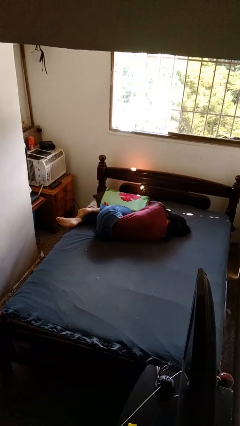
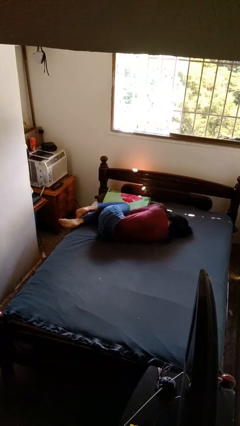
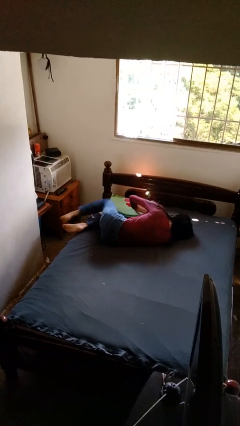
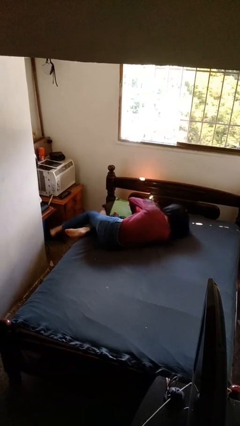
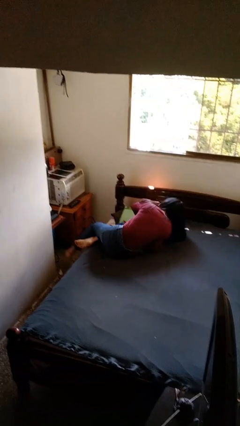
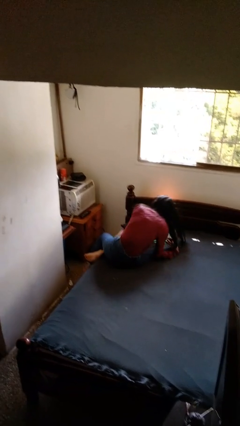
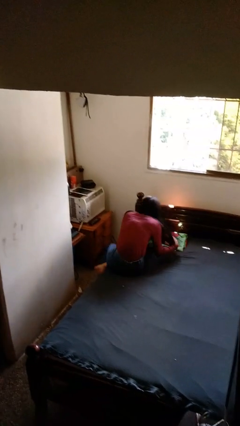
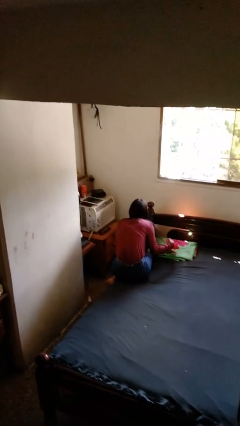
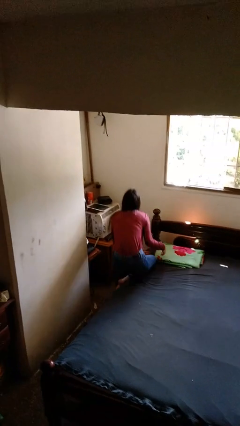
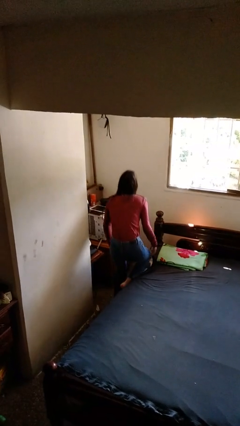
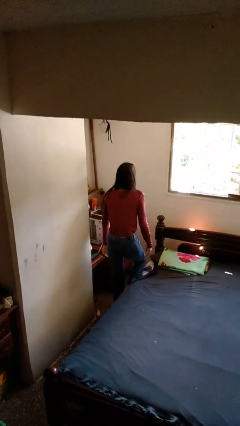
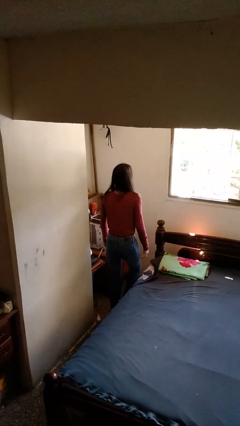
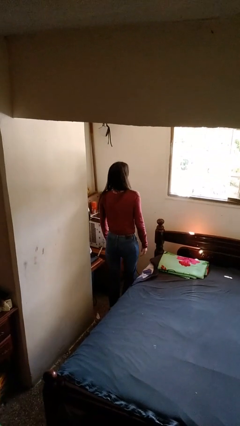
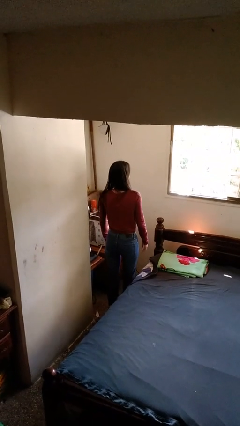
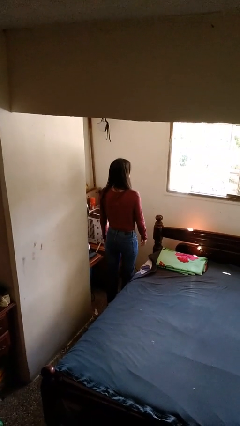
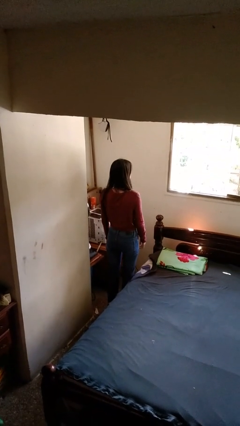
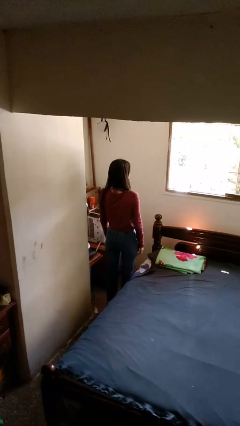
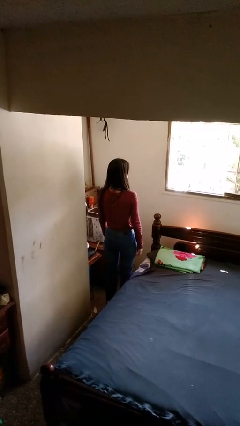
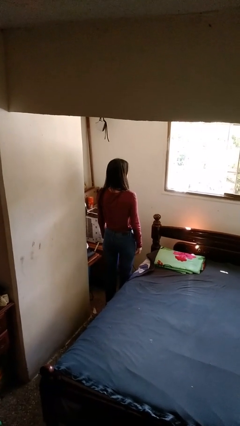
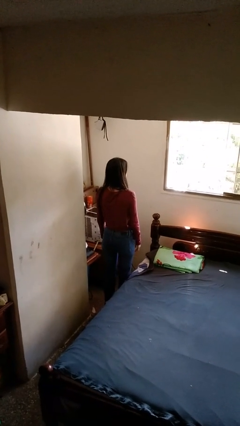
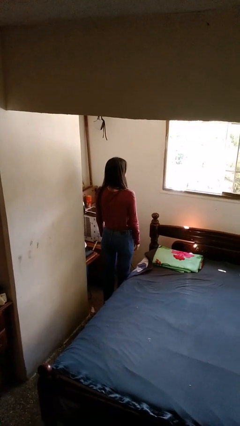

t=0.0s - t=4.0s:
person stands up

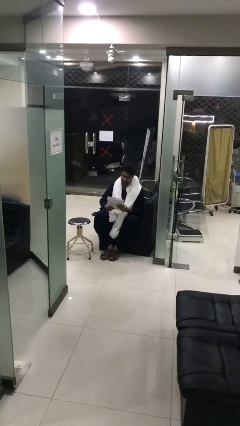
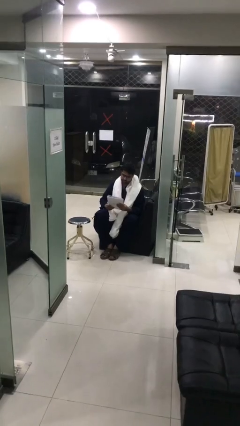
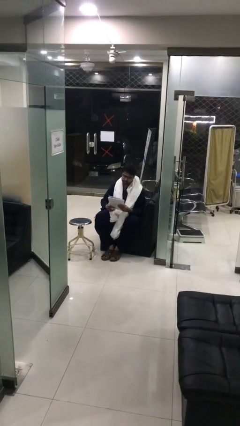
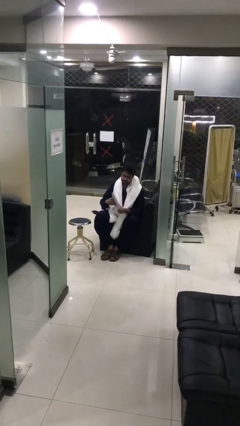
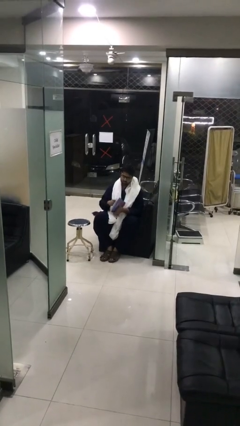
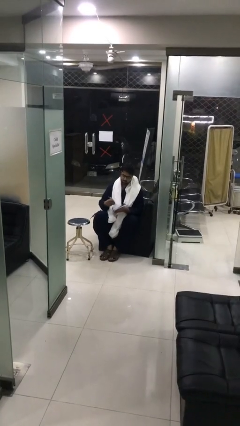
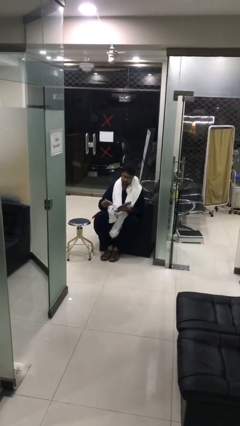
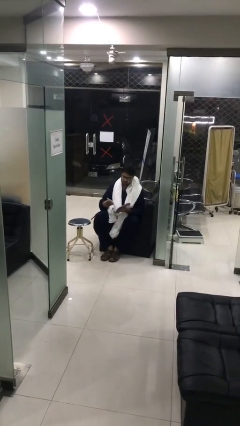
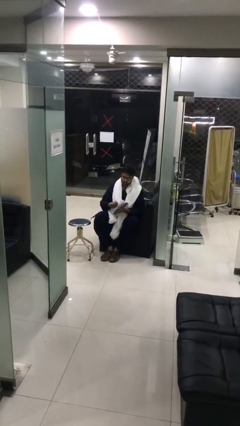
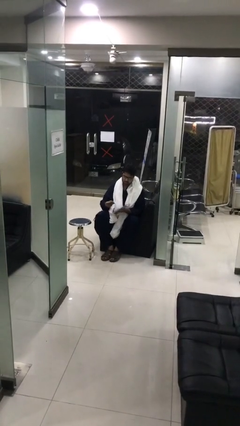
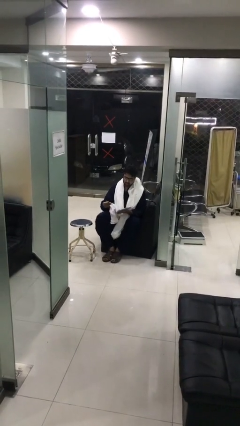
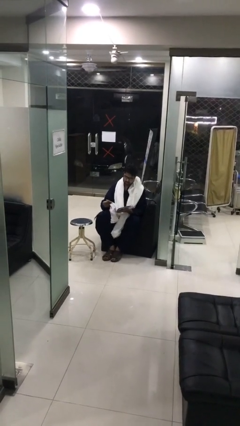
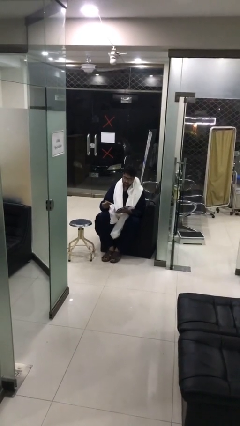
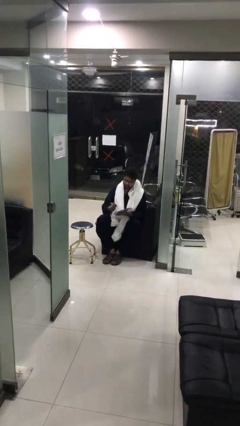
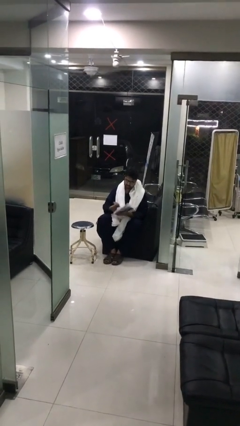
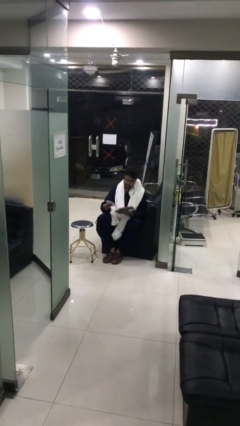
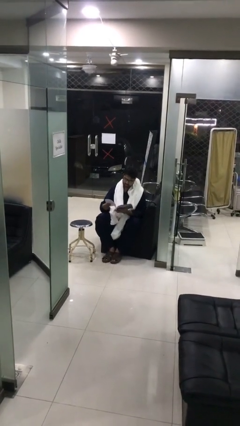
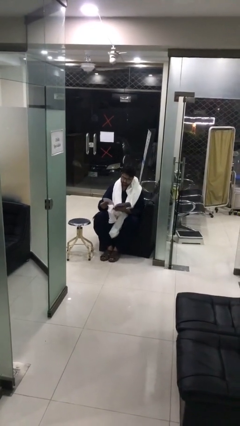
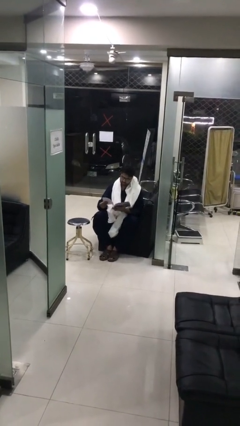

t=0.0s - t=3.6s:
person reads document

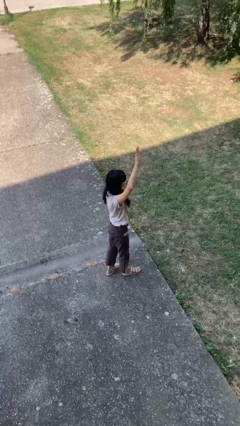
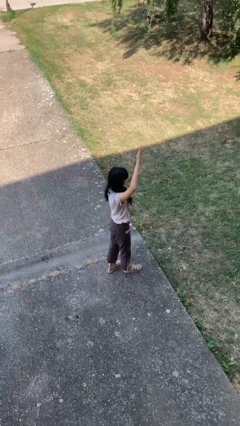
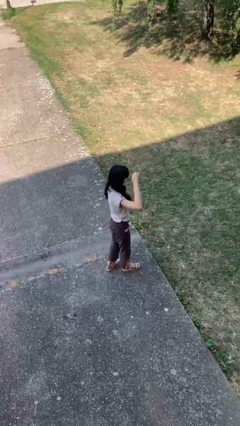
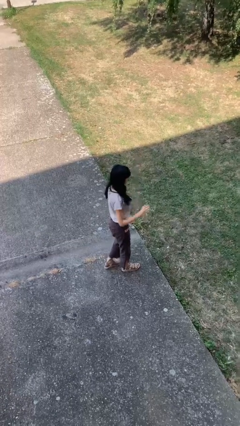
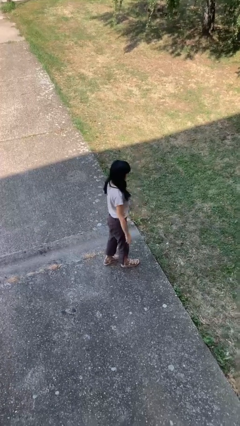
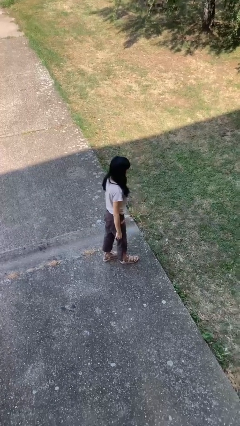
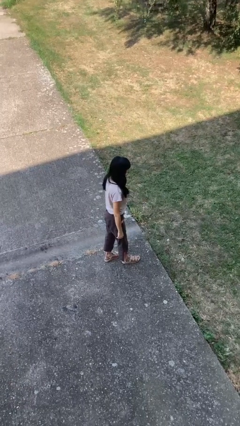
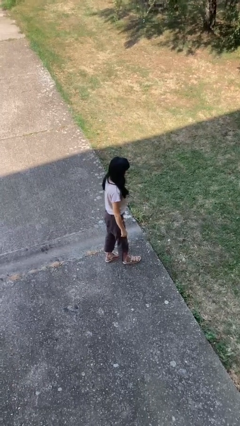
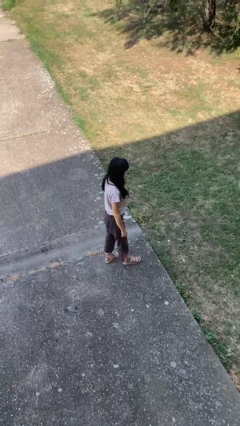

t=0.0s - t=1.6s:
person gestures lower hand

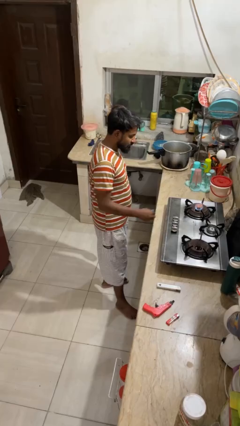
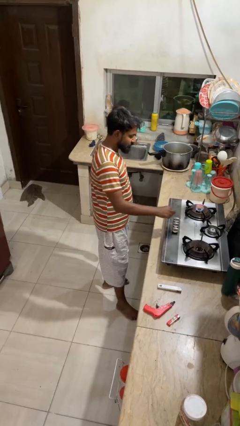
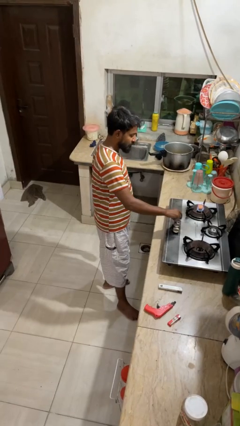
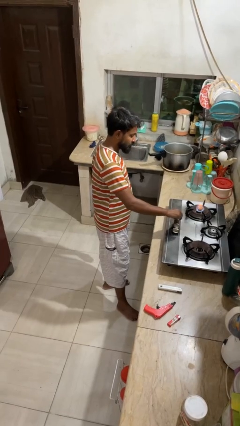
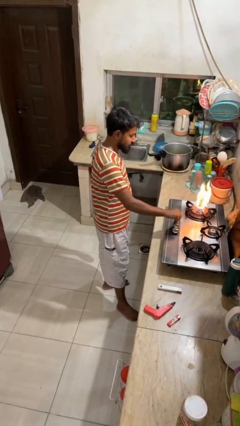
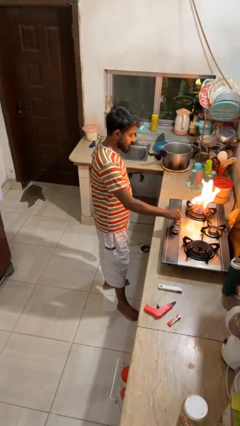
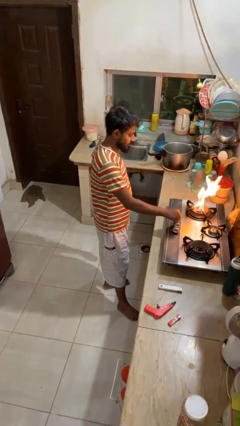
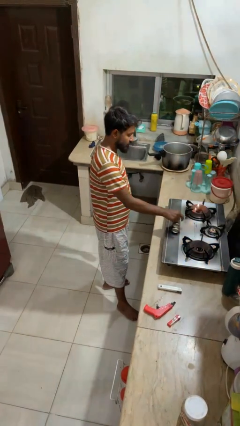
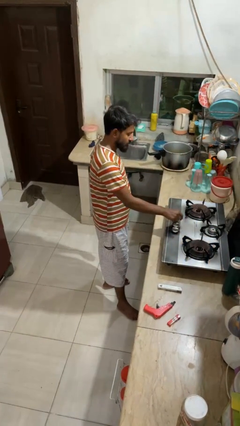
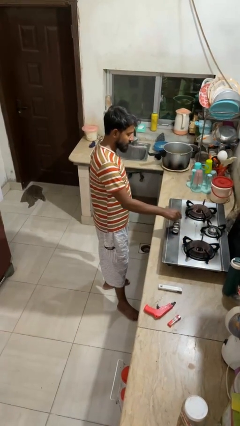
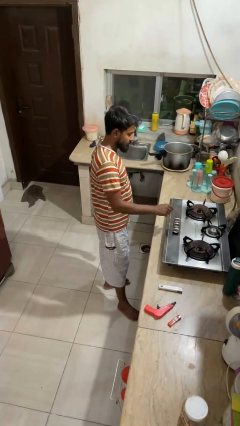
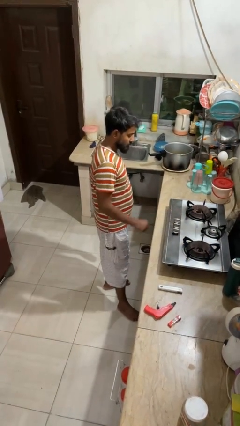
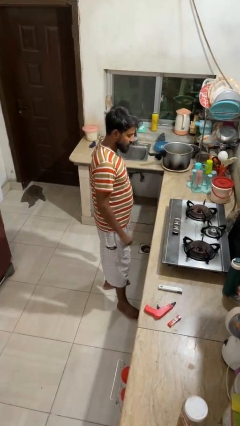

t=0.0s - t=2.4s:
person turns off stovetop

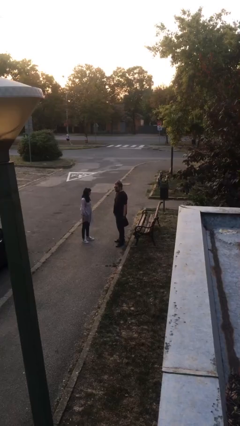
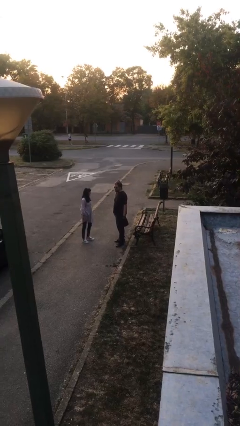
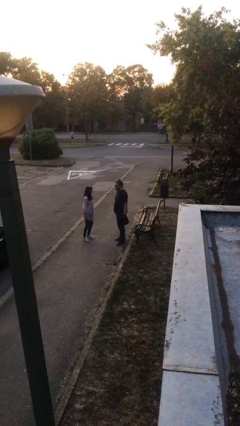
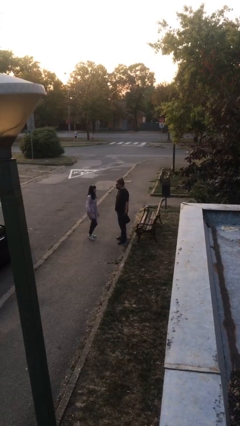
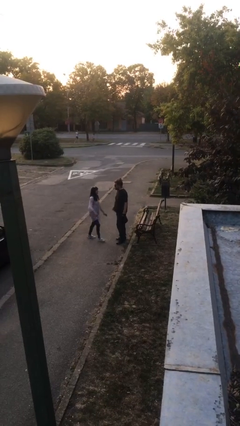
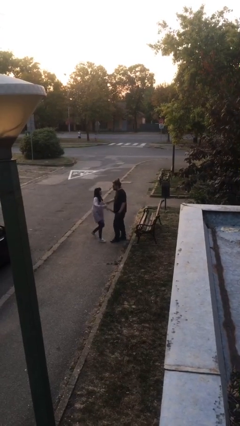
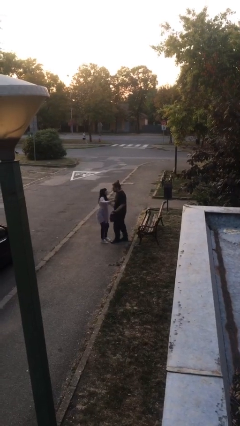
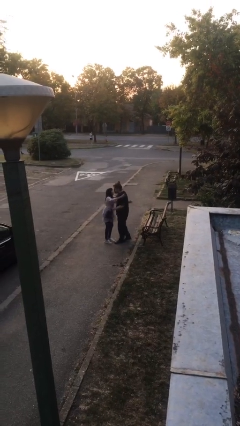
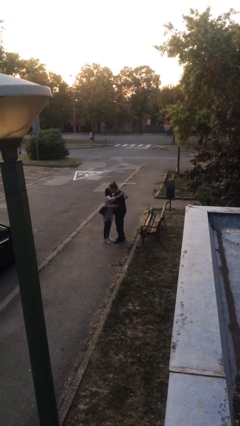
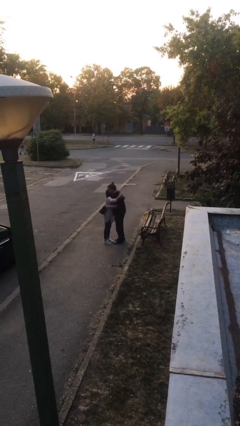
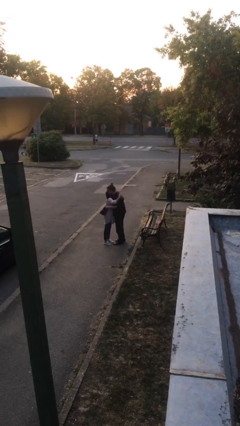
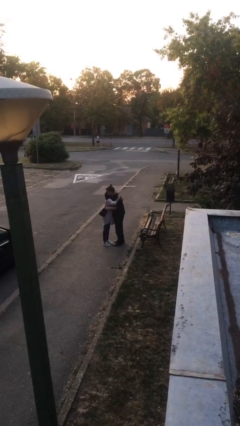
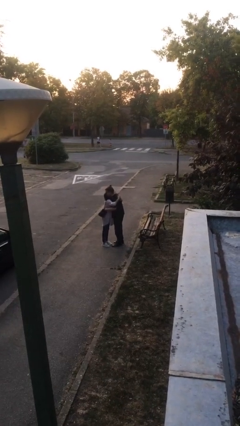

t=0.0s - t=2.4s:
person embraces person

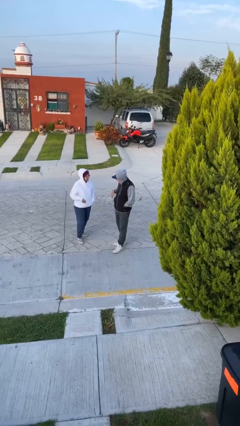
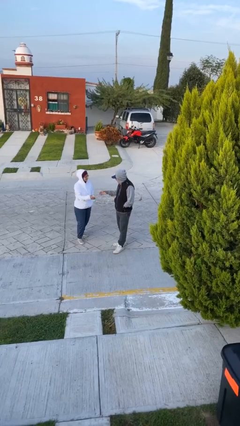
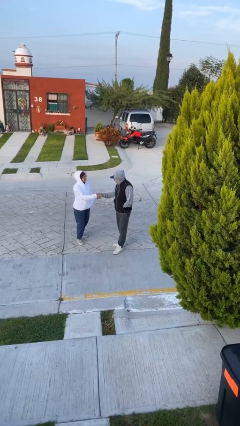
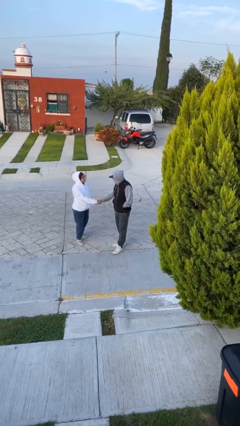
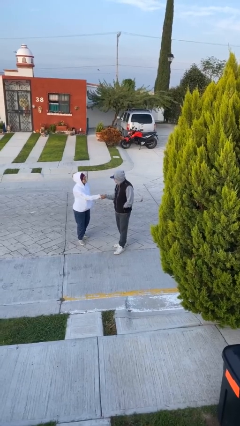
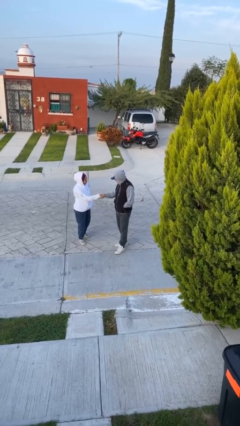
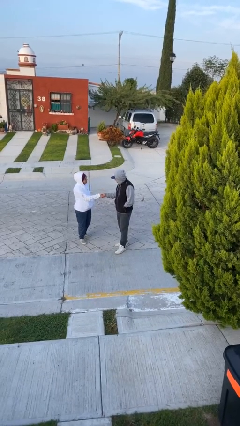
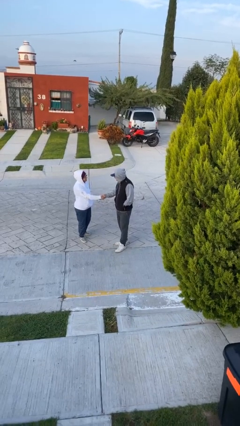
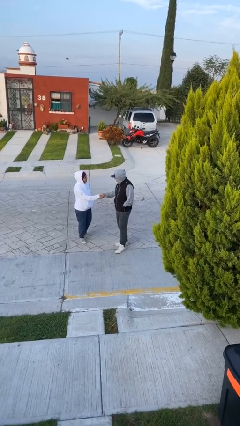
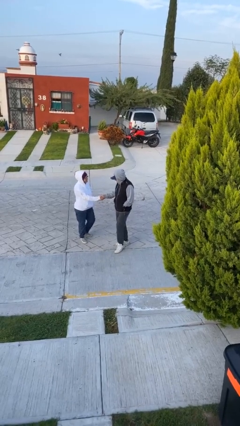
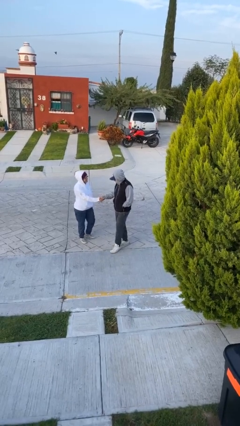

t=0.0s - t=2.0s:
person shakes hand

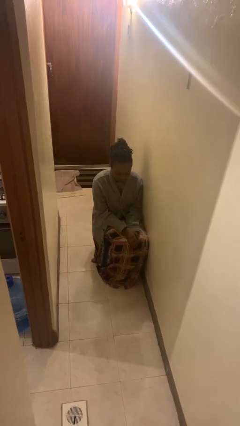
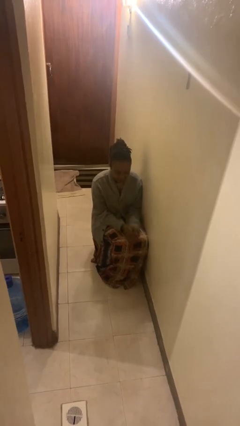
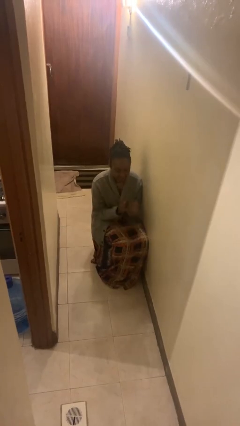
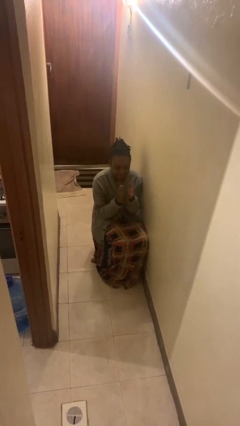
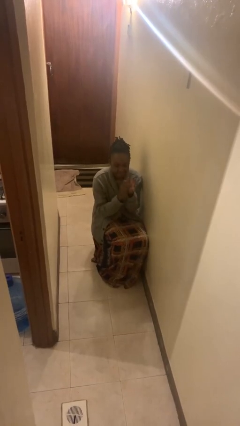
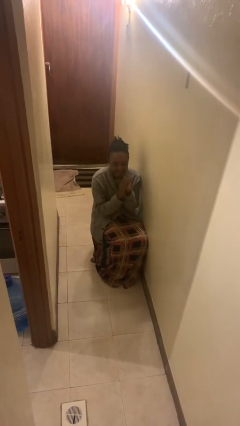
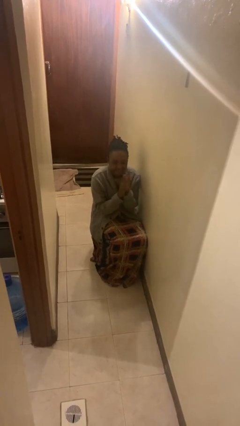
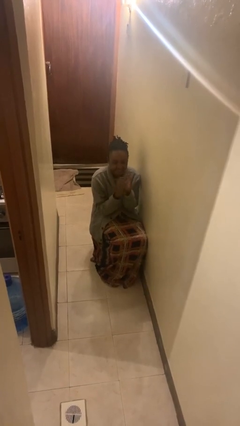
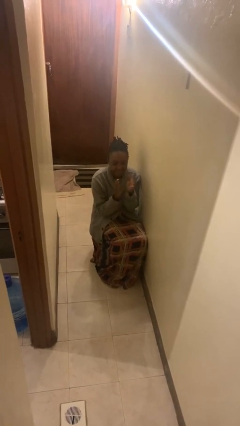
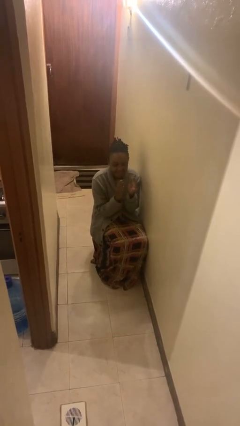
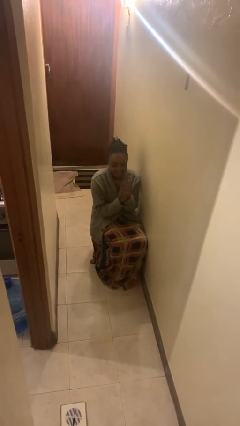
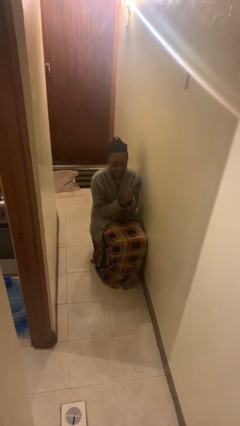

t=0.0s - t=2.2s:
person claps hands
